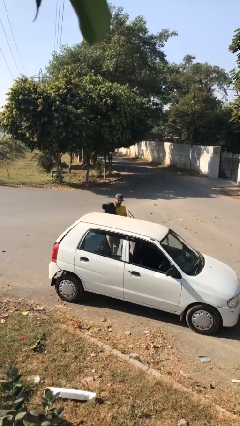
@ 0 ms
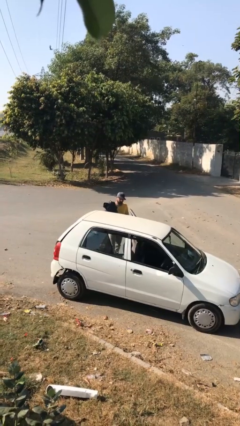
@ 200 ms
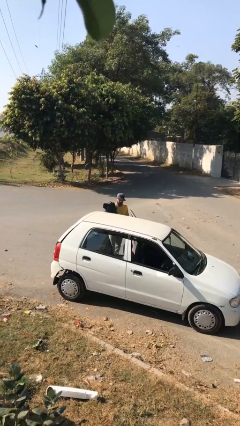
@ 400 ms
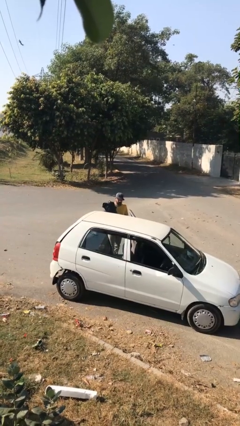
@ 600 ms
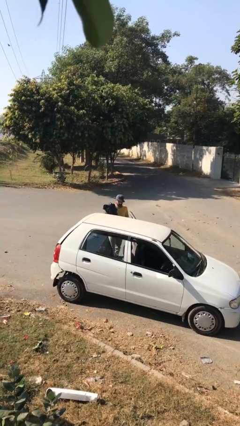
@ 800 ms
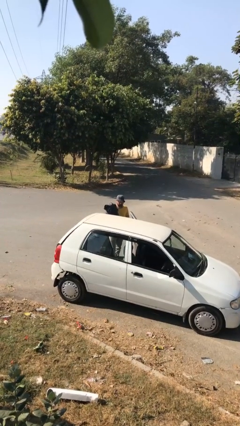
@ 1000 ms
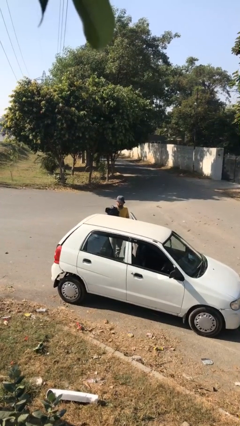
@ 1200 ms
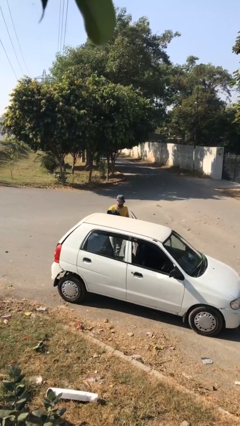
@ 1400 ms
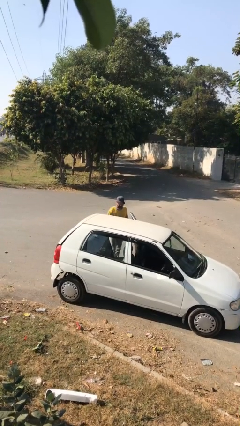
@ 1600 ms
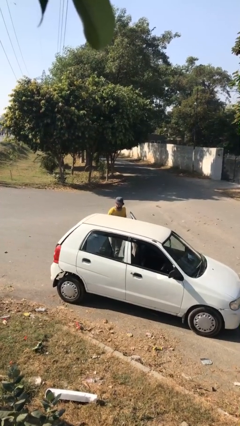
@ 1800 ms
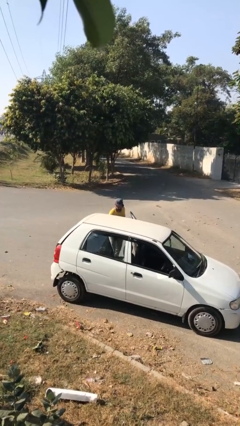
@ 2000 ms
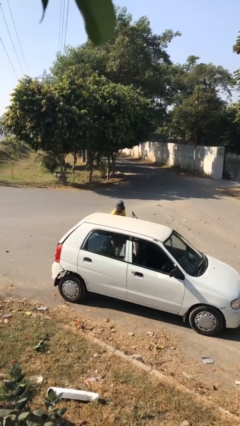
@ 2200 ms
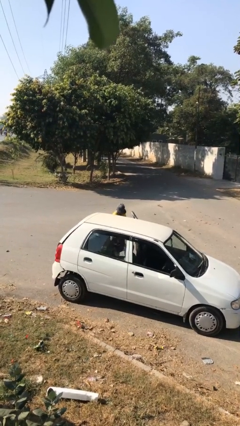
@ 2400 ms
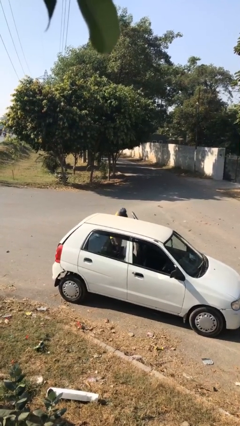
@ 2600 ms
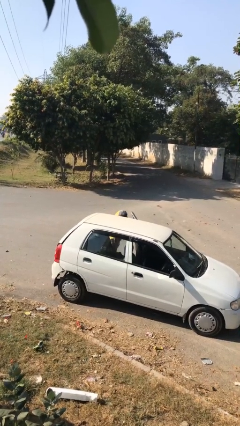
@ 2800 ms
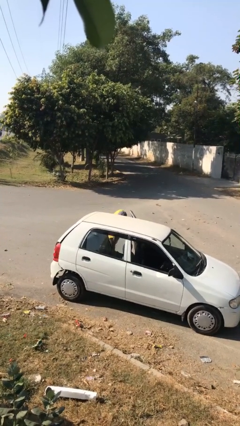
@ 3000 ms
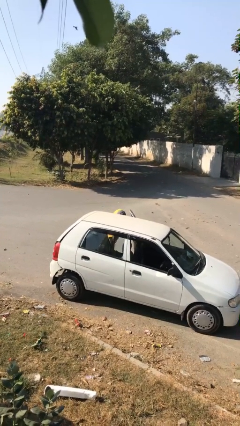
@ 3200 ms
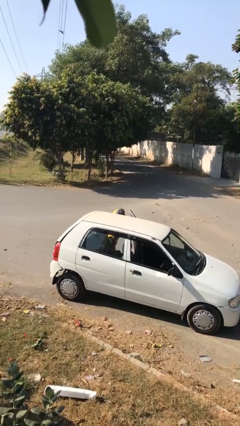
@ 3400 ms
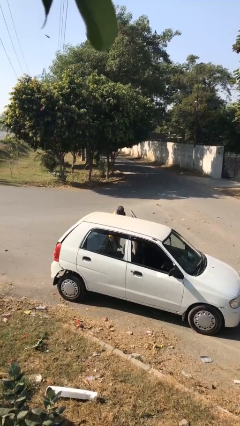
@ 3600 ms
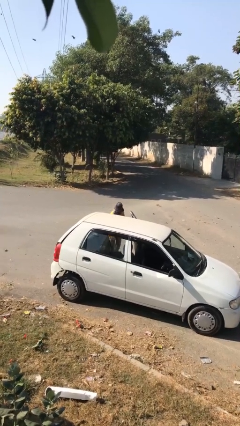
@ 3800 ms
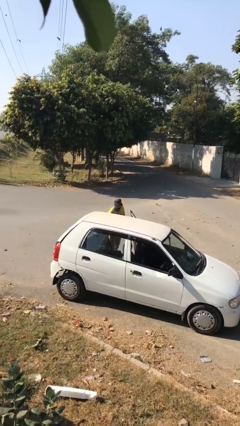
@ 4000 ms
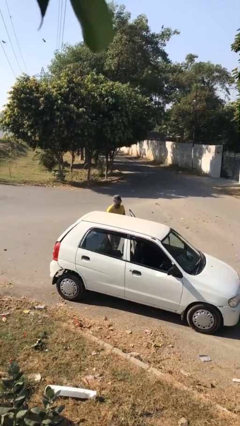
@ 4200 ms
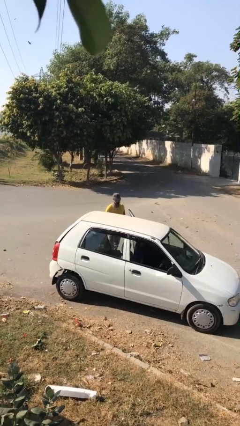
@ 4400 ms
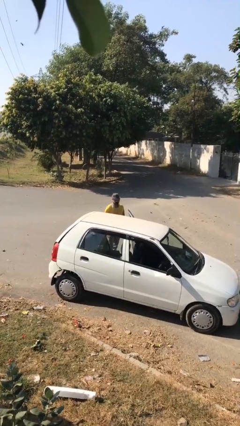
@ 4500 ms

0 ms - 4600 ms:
person loads car

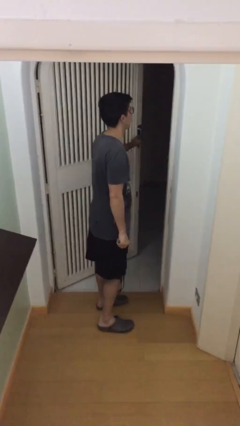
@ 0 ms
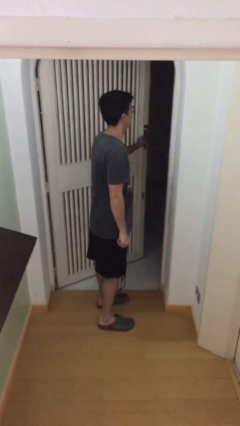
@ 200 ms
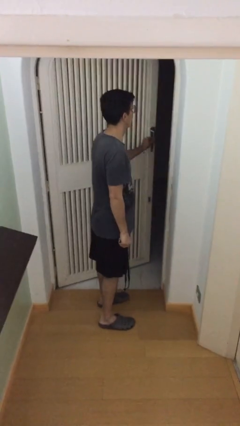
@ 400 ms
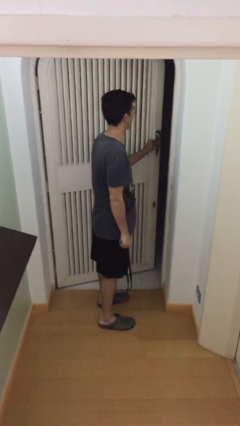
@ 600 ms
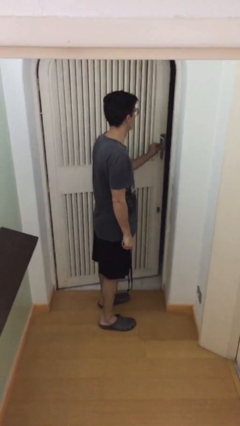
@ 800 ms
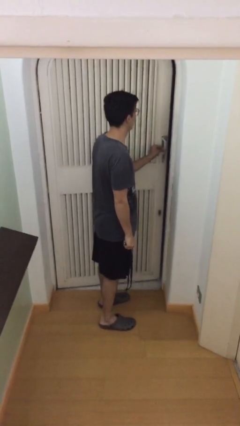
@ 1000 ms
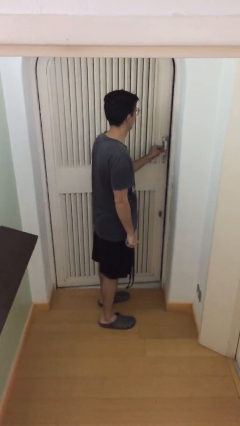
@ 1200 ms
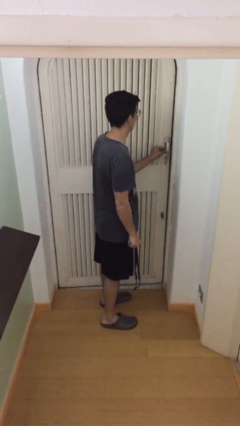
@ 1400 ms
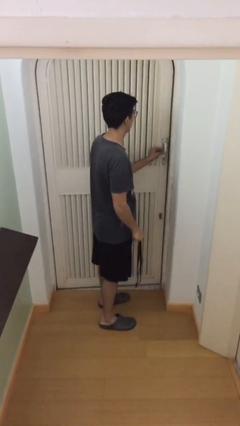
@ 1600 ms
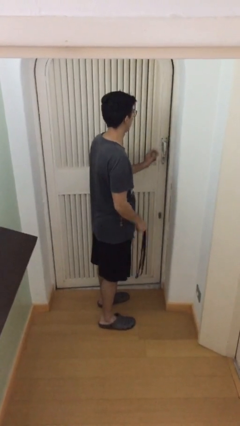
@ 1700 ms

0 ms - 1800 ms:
person closes facility door

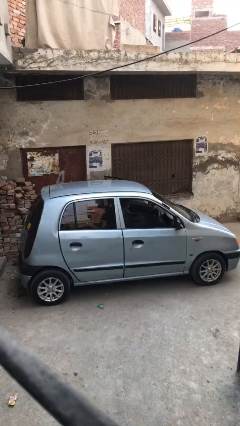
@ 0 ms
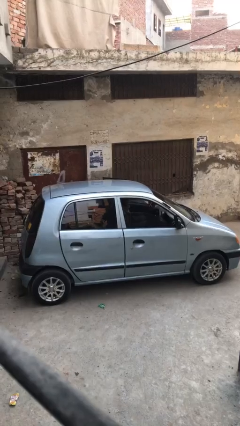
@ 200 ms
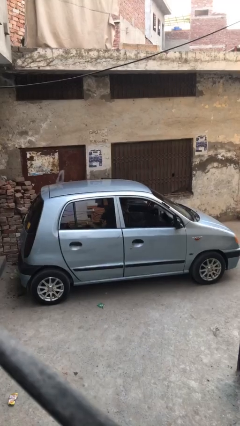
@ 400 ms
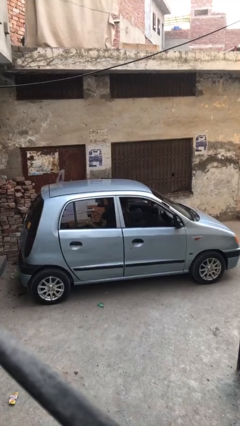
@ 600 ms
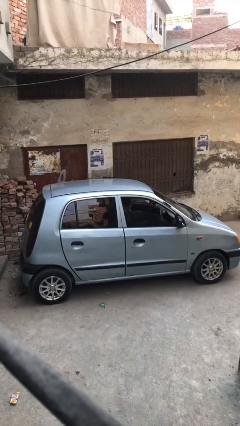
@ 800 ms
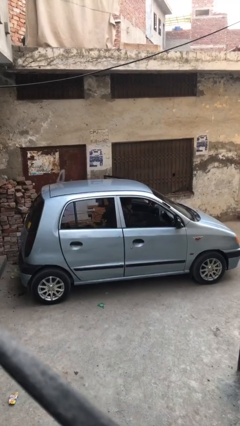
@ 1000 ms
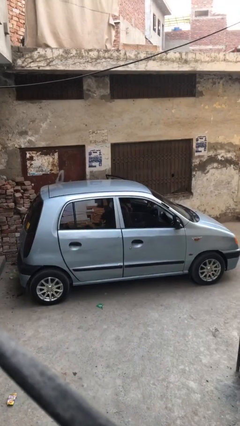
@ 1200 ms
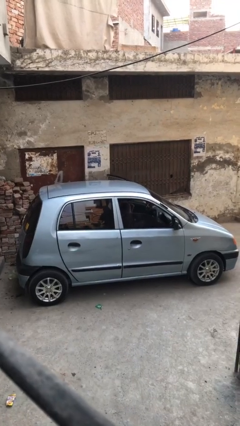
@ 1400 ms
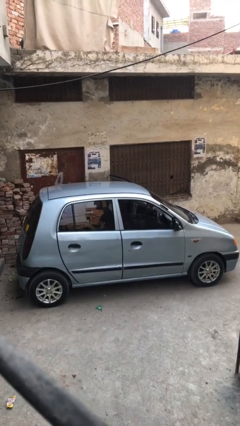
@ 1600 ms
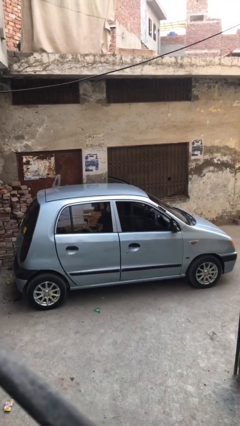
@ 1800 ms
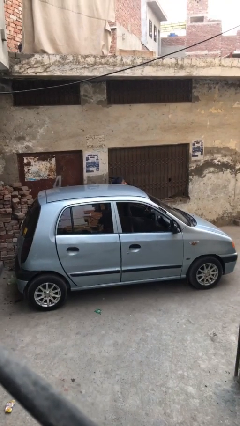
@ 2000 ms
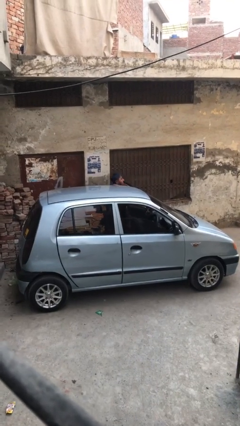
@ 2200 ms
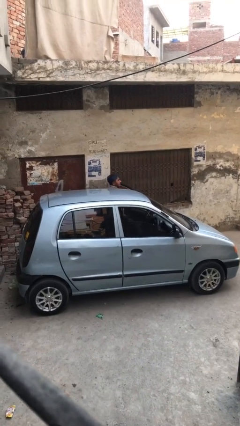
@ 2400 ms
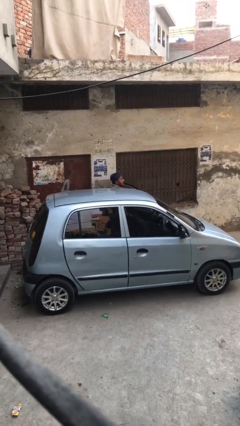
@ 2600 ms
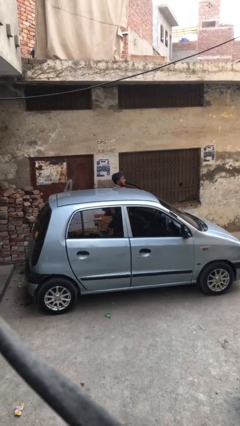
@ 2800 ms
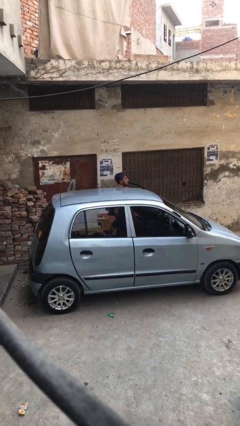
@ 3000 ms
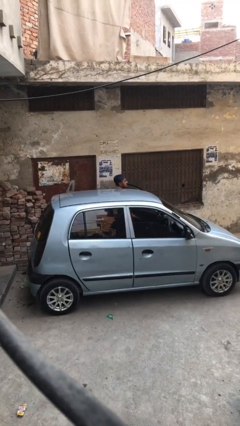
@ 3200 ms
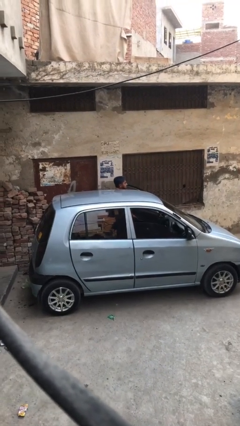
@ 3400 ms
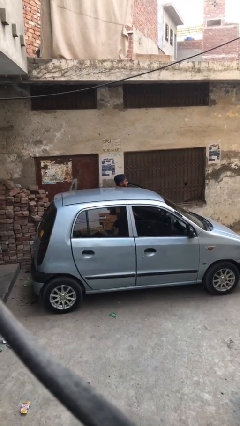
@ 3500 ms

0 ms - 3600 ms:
person exits car

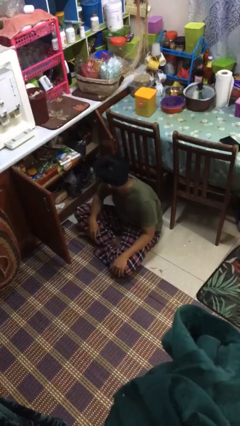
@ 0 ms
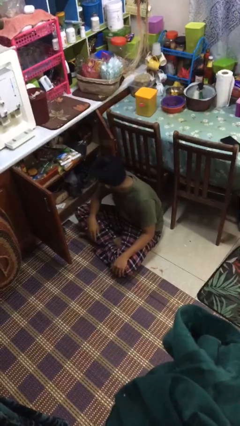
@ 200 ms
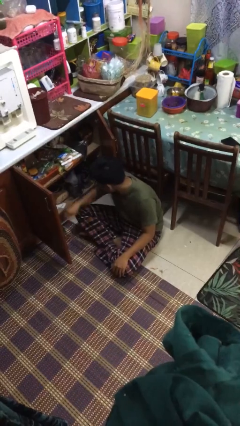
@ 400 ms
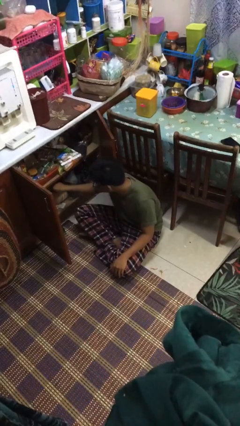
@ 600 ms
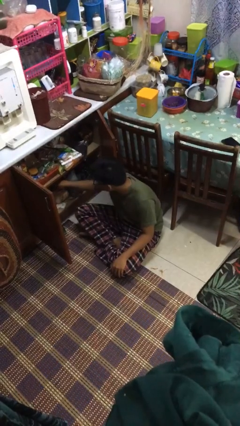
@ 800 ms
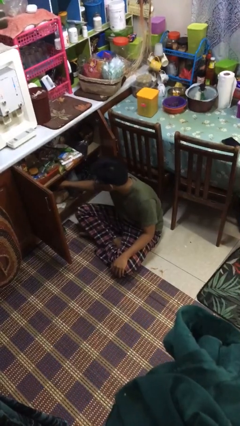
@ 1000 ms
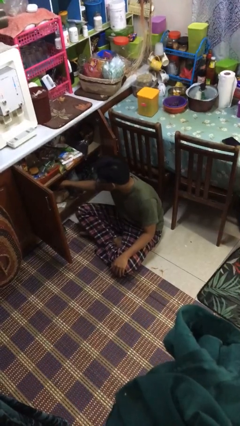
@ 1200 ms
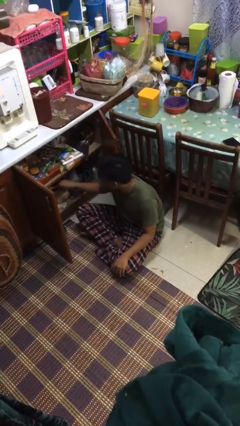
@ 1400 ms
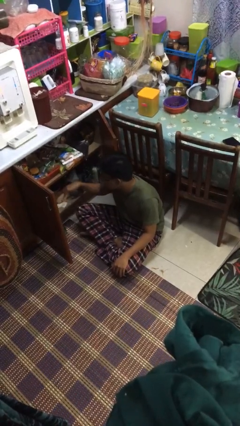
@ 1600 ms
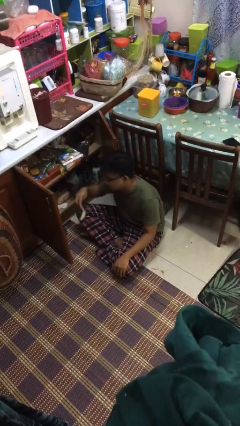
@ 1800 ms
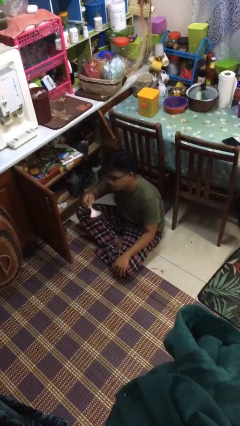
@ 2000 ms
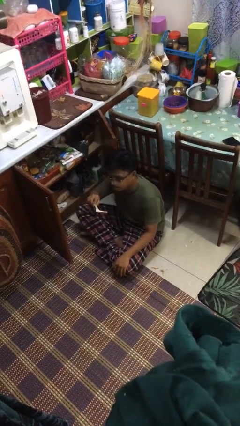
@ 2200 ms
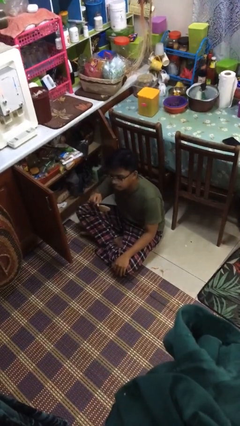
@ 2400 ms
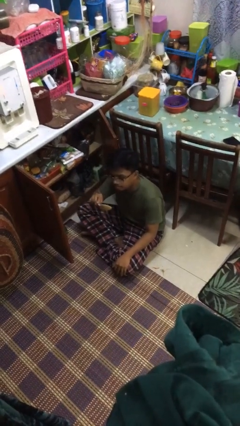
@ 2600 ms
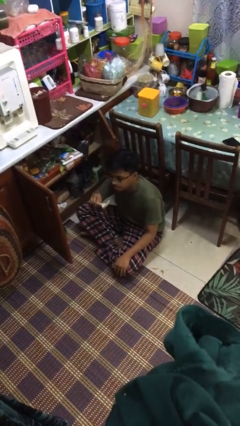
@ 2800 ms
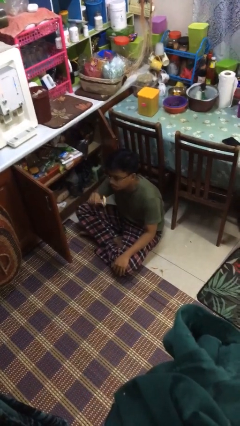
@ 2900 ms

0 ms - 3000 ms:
person takes object from kitchen drawer

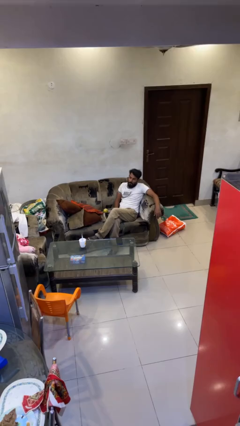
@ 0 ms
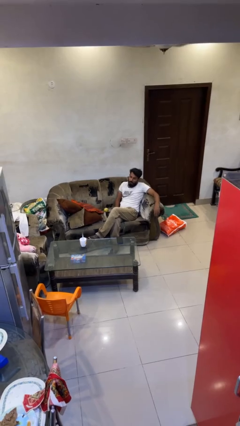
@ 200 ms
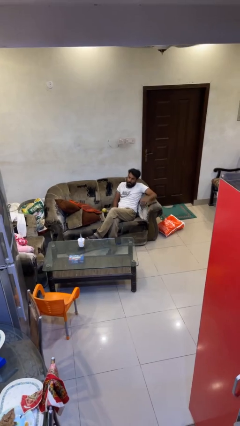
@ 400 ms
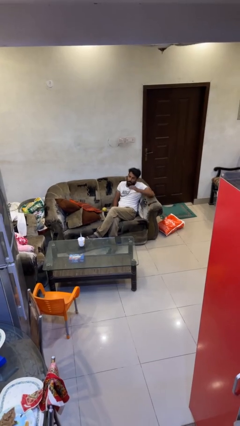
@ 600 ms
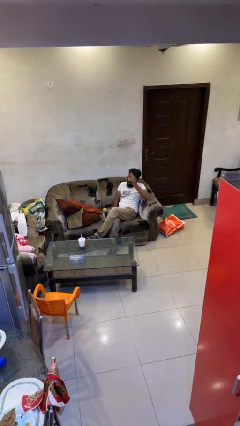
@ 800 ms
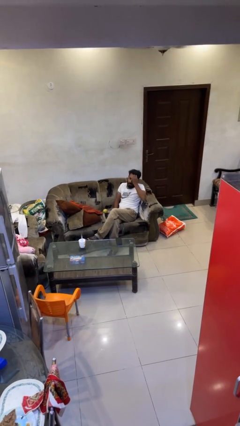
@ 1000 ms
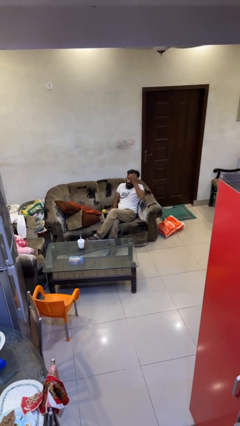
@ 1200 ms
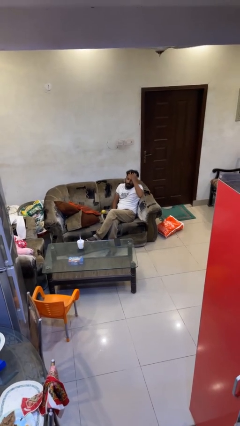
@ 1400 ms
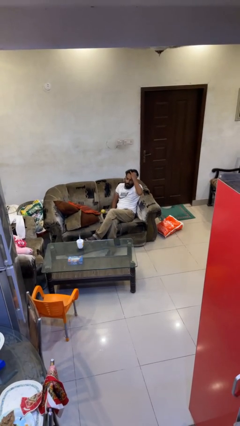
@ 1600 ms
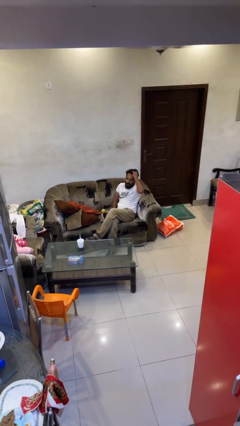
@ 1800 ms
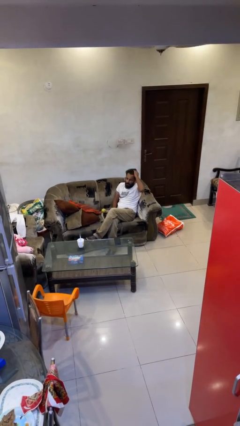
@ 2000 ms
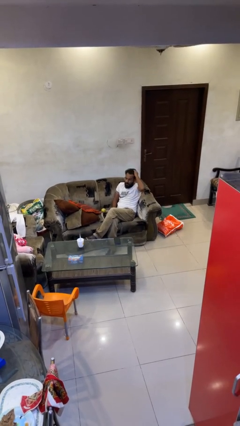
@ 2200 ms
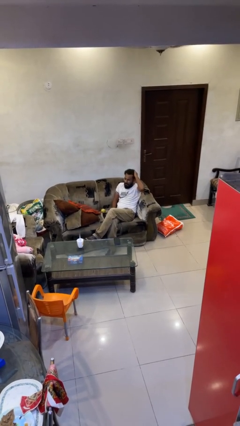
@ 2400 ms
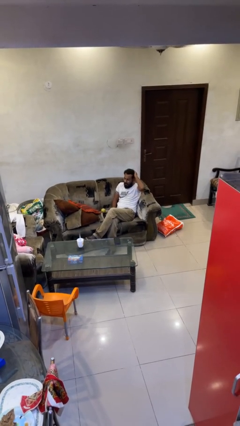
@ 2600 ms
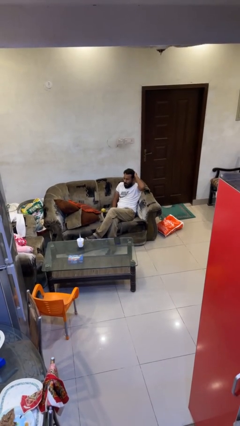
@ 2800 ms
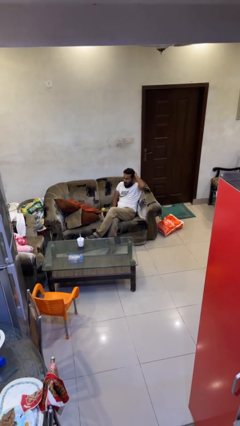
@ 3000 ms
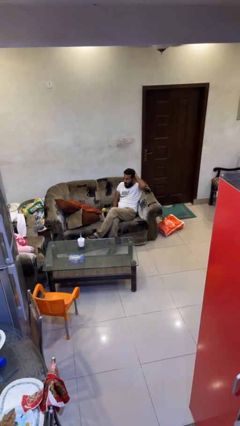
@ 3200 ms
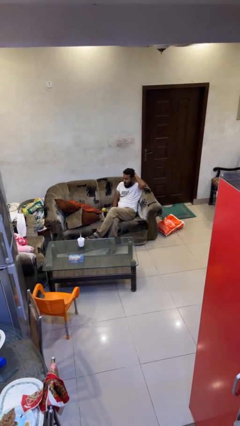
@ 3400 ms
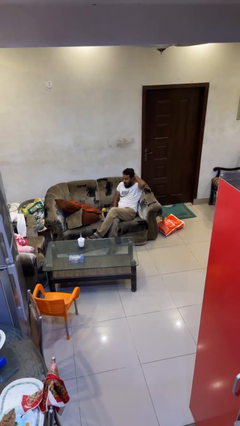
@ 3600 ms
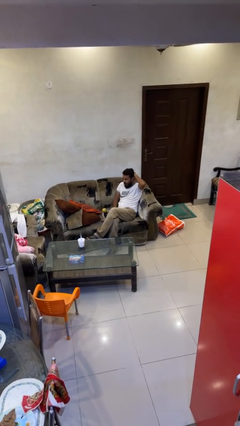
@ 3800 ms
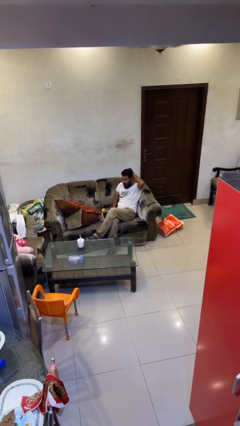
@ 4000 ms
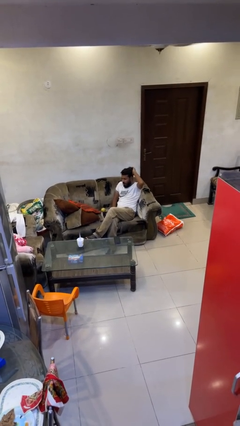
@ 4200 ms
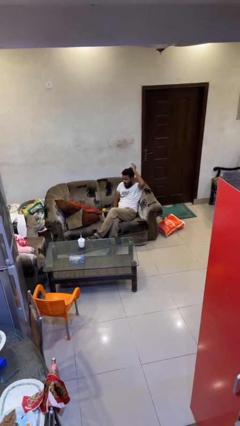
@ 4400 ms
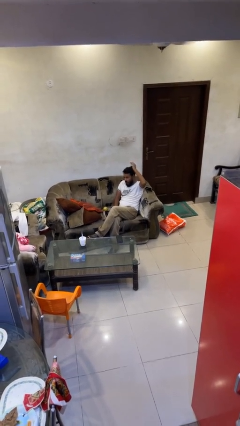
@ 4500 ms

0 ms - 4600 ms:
person strokes hair
